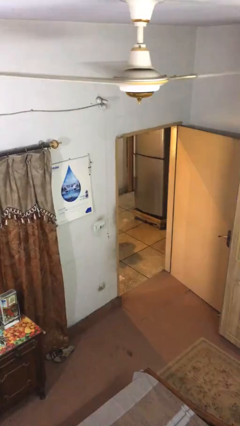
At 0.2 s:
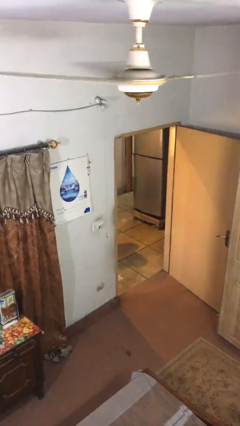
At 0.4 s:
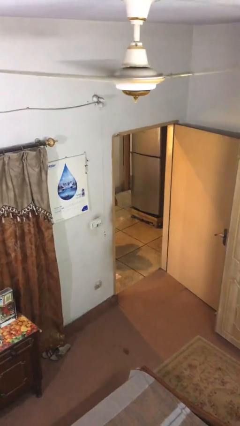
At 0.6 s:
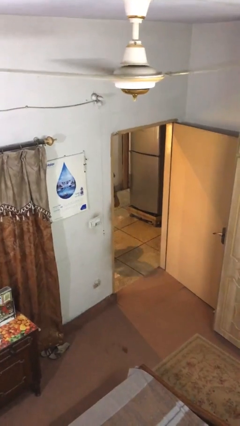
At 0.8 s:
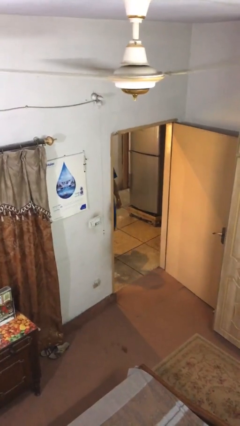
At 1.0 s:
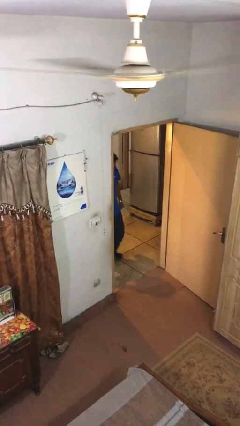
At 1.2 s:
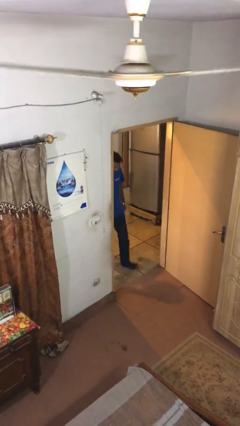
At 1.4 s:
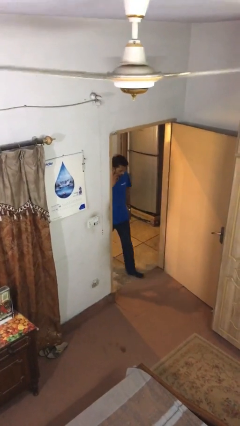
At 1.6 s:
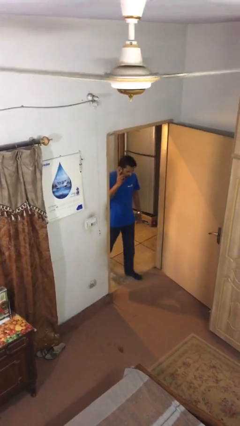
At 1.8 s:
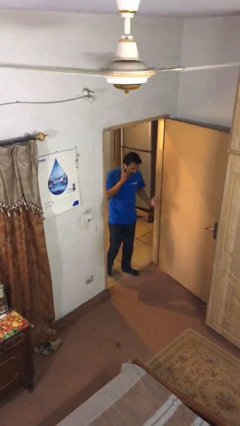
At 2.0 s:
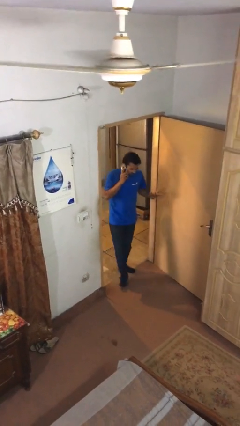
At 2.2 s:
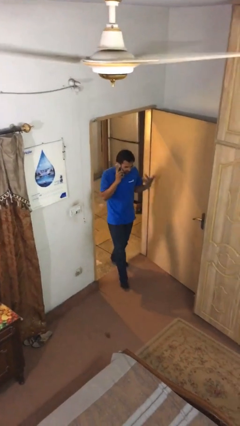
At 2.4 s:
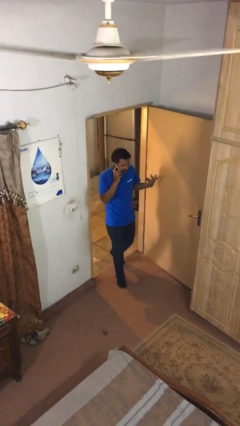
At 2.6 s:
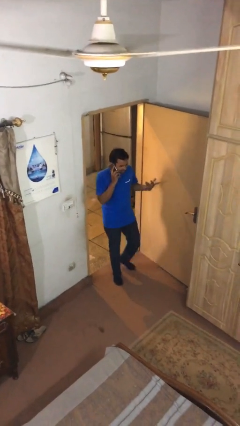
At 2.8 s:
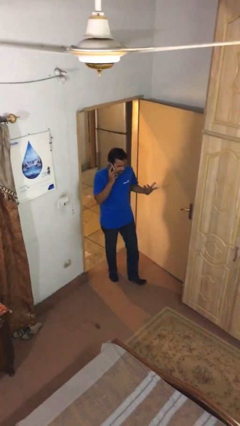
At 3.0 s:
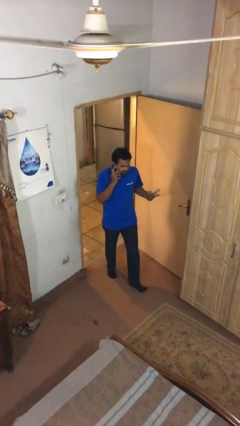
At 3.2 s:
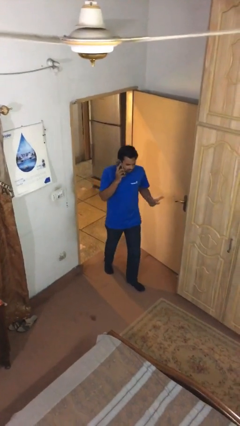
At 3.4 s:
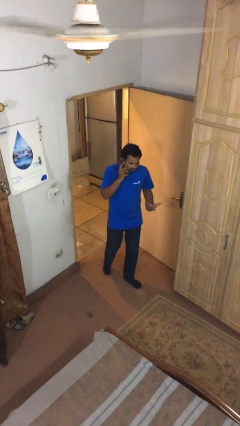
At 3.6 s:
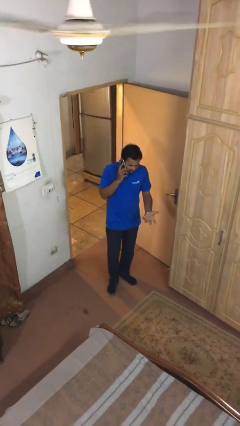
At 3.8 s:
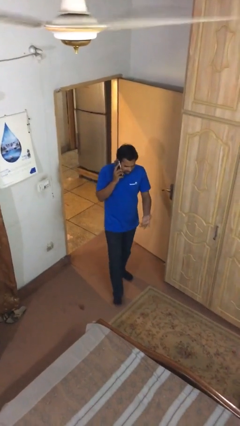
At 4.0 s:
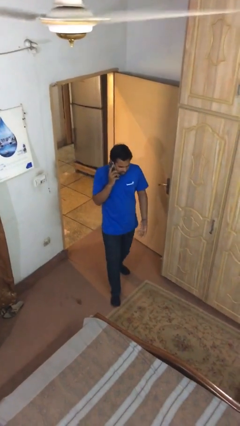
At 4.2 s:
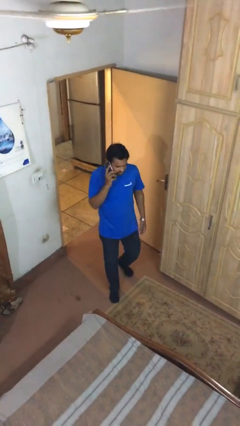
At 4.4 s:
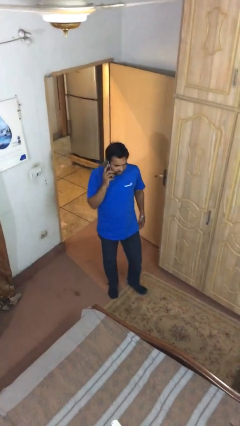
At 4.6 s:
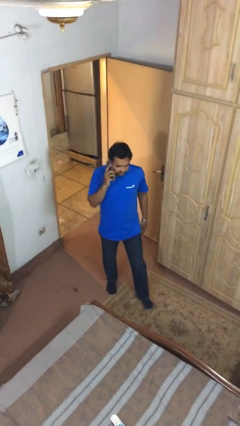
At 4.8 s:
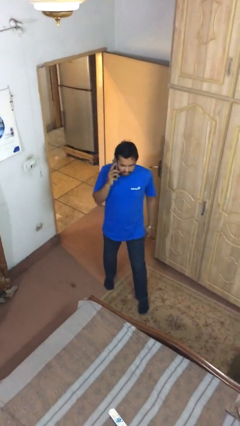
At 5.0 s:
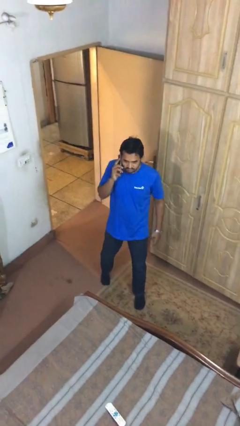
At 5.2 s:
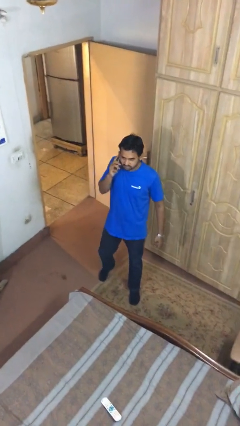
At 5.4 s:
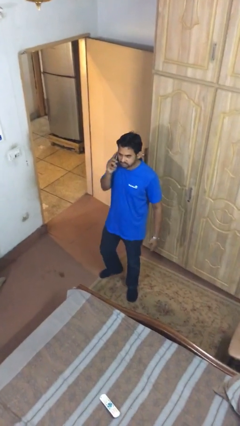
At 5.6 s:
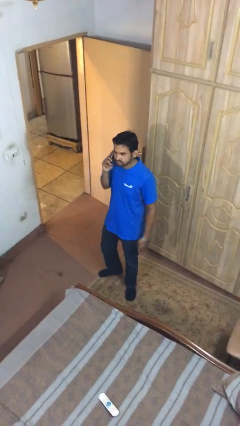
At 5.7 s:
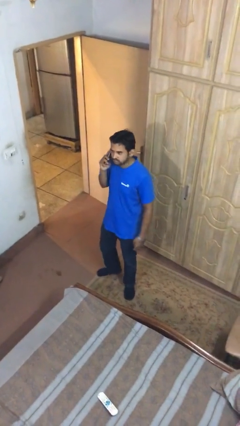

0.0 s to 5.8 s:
person enters scene through structure

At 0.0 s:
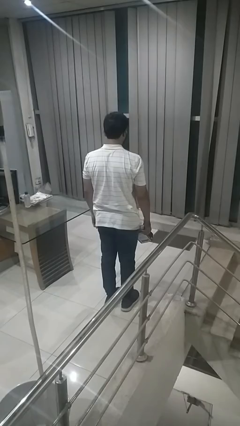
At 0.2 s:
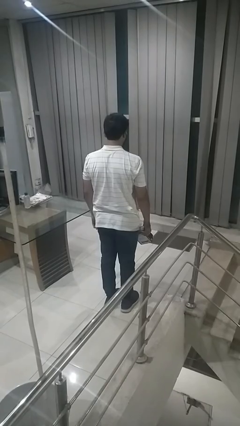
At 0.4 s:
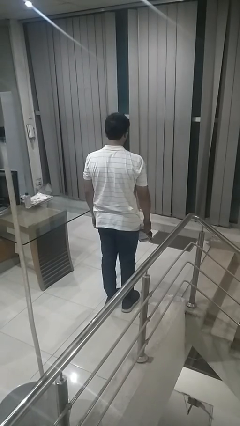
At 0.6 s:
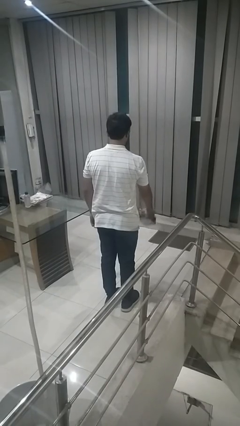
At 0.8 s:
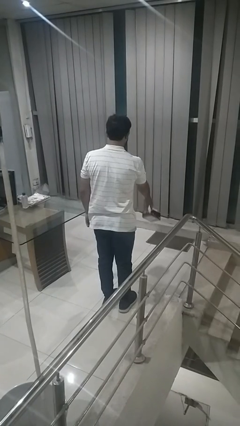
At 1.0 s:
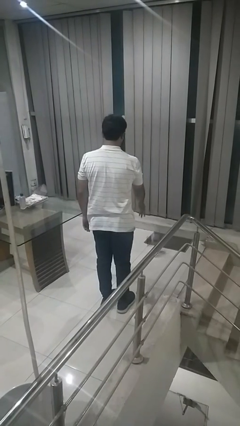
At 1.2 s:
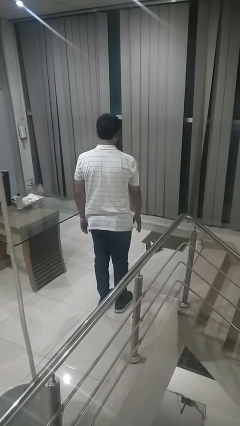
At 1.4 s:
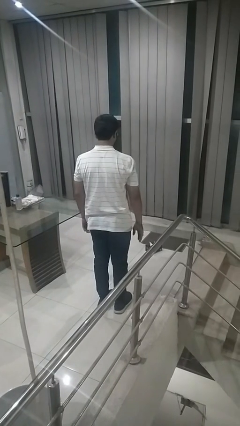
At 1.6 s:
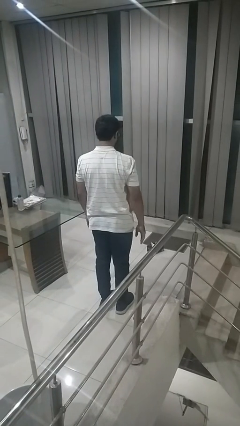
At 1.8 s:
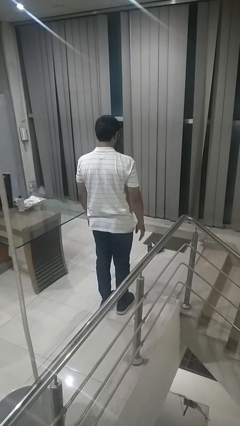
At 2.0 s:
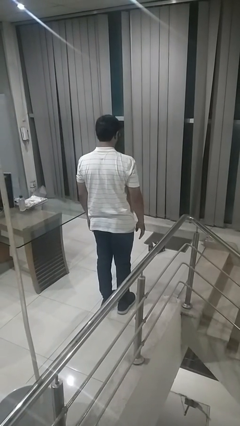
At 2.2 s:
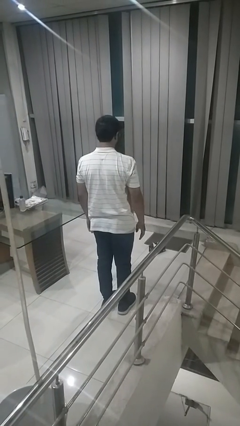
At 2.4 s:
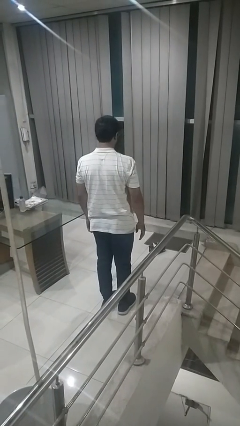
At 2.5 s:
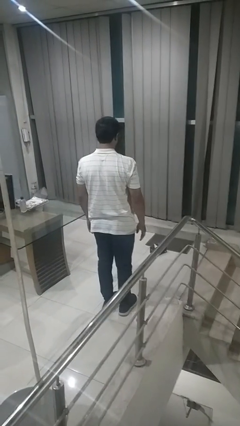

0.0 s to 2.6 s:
person throws object to ground

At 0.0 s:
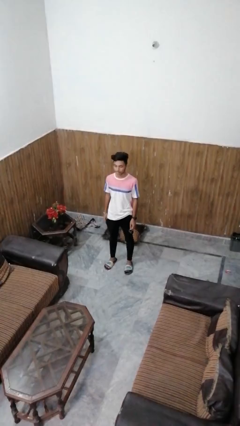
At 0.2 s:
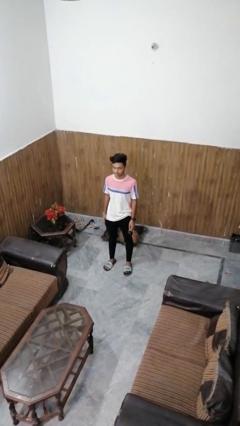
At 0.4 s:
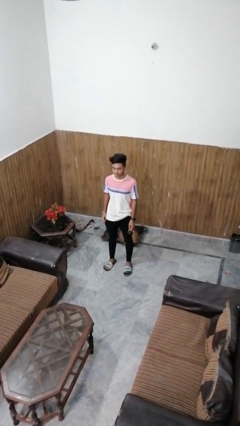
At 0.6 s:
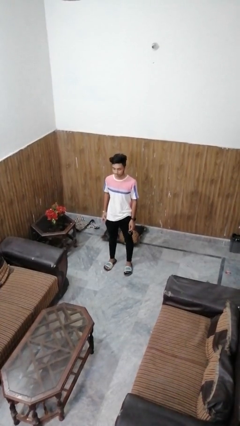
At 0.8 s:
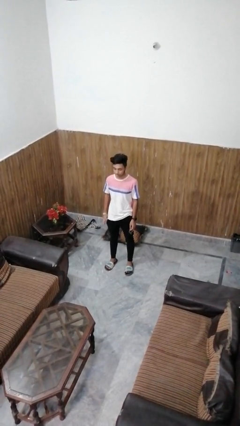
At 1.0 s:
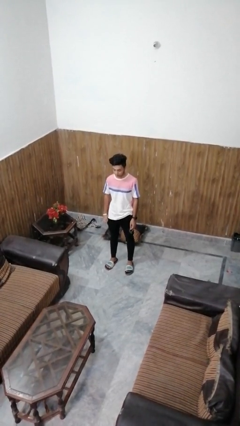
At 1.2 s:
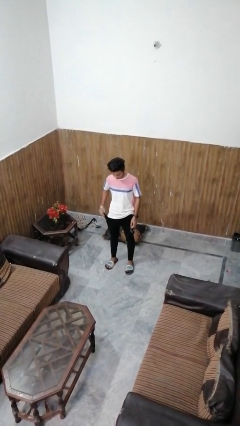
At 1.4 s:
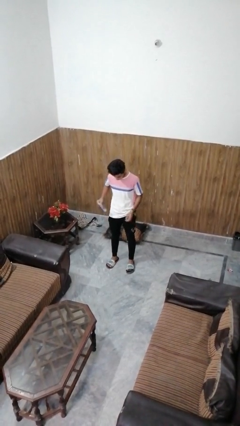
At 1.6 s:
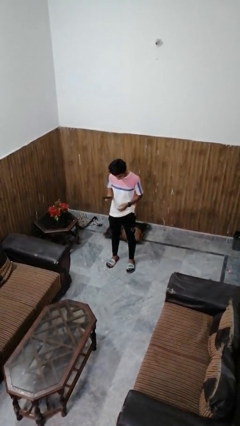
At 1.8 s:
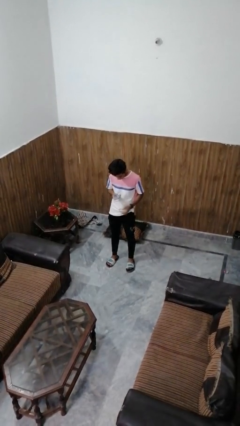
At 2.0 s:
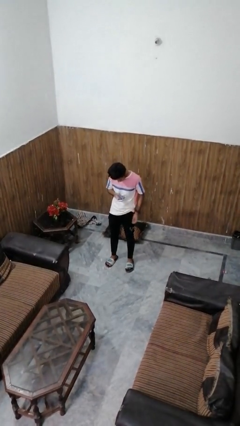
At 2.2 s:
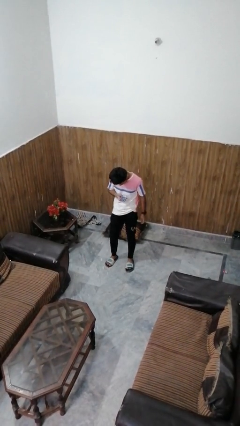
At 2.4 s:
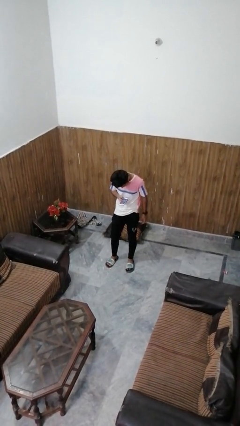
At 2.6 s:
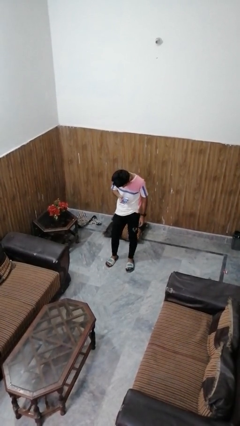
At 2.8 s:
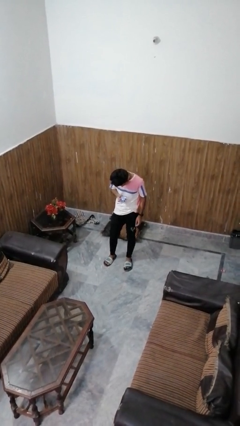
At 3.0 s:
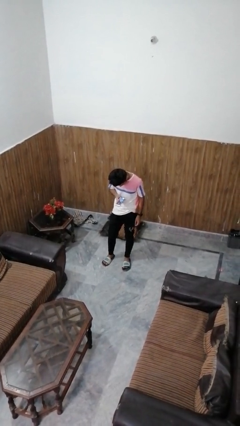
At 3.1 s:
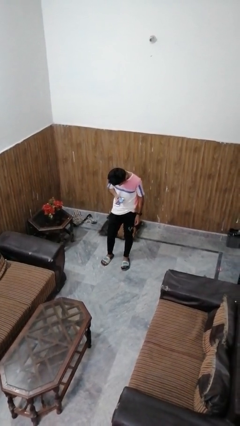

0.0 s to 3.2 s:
person takes phone from pocket

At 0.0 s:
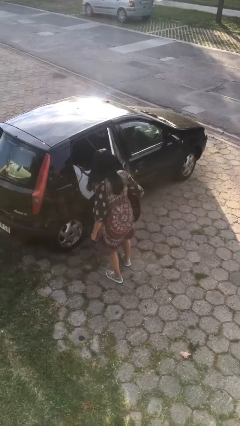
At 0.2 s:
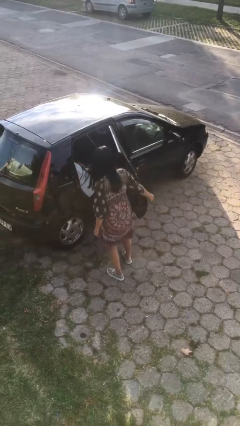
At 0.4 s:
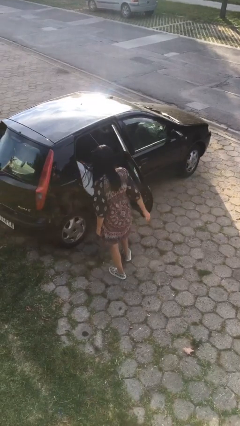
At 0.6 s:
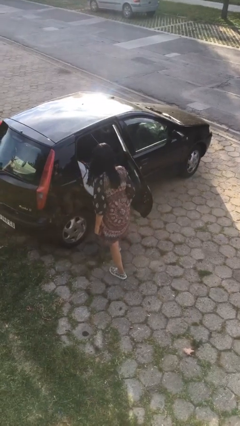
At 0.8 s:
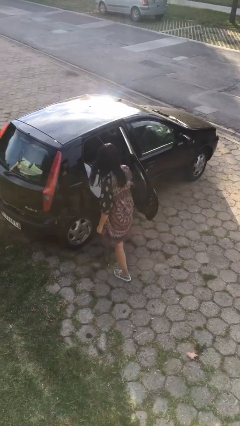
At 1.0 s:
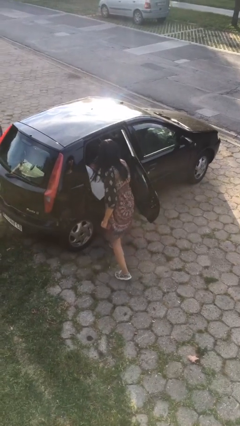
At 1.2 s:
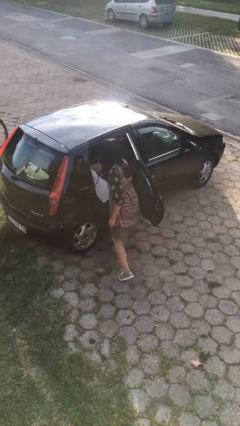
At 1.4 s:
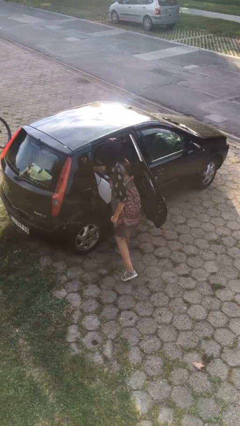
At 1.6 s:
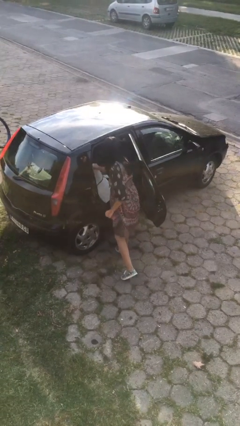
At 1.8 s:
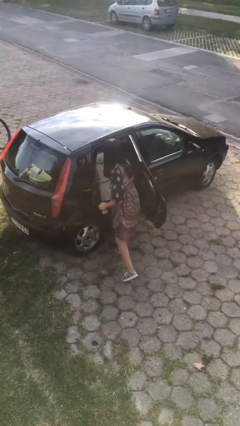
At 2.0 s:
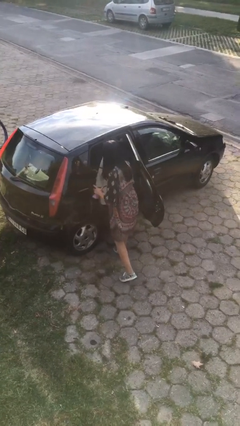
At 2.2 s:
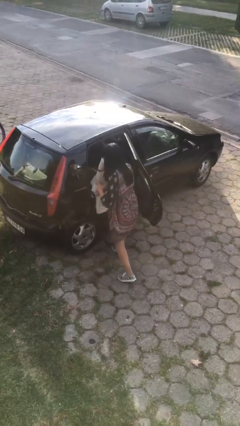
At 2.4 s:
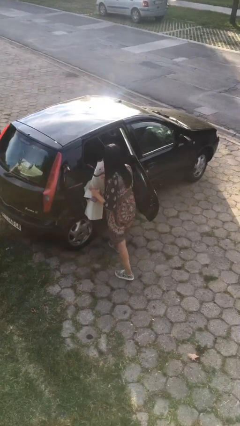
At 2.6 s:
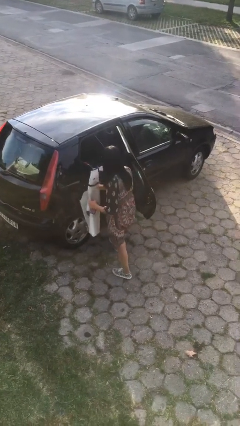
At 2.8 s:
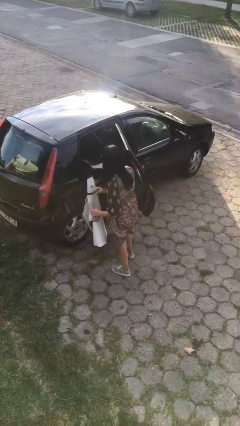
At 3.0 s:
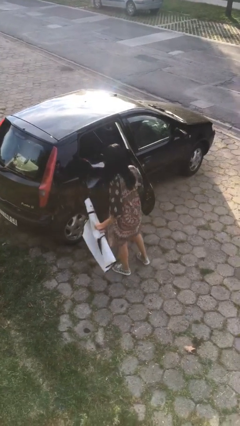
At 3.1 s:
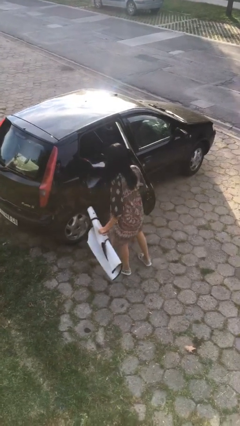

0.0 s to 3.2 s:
person unloads car

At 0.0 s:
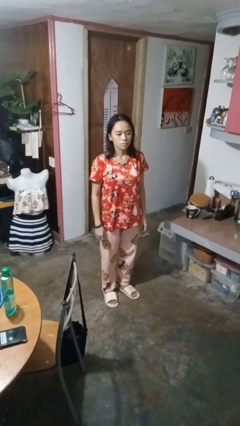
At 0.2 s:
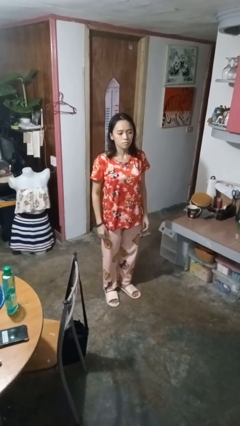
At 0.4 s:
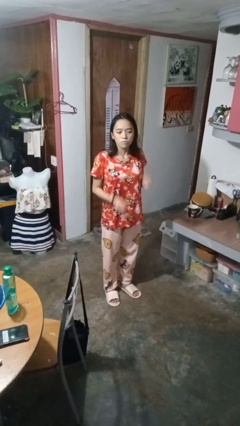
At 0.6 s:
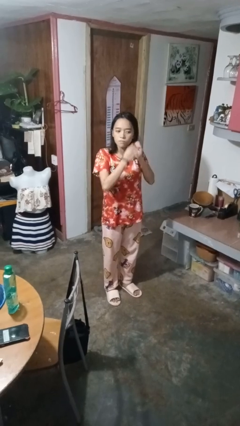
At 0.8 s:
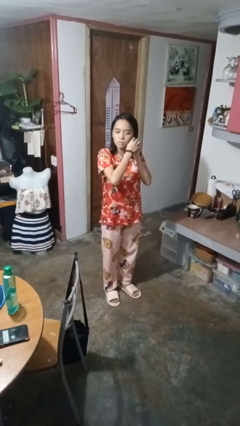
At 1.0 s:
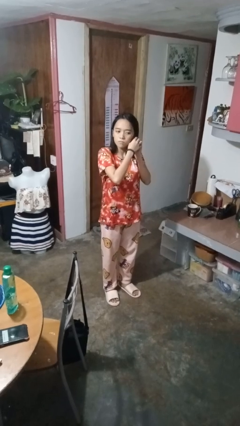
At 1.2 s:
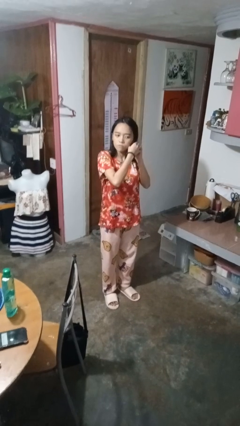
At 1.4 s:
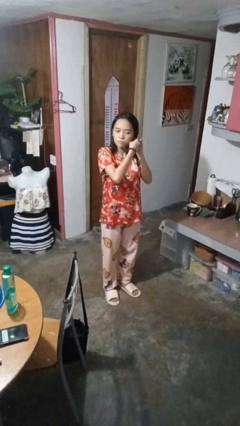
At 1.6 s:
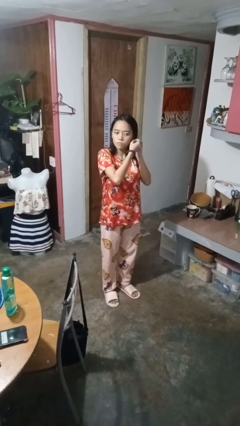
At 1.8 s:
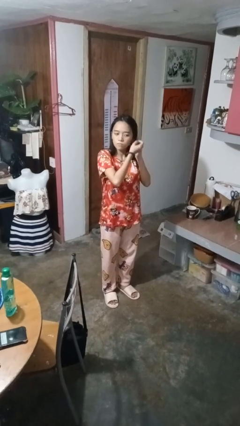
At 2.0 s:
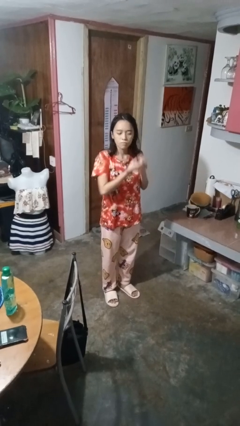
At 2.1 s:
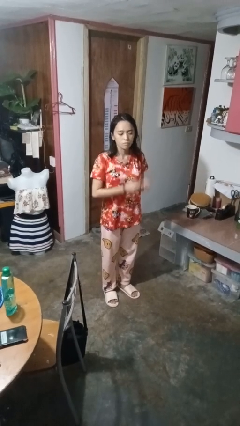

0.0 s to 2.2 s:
person takes off earrings

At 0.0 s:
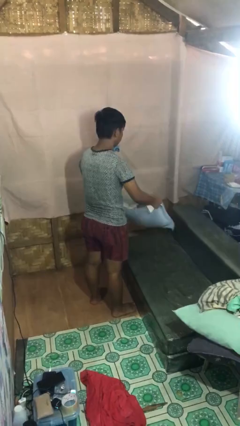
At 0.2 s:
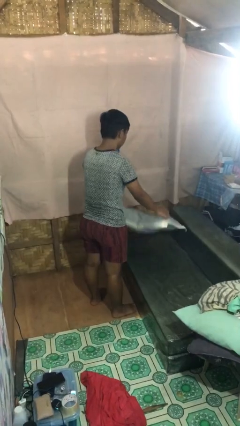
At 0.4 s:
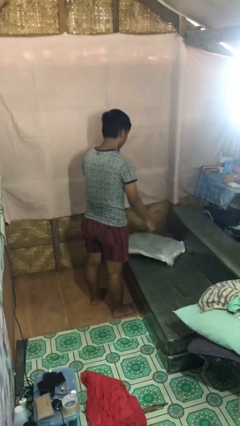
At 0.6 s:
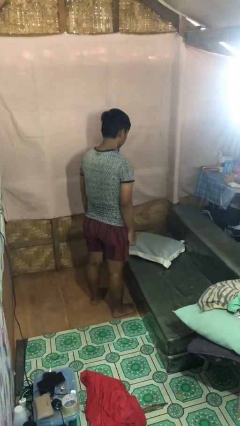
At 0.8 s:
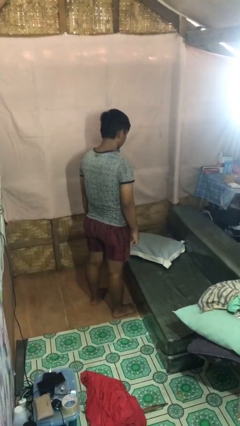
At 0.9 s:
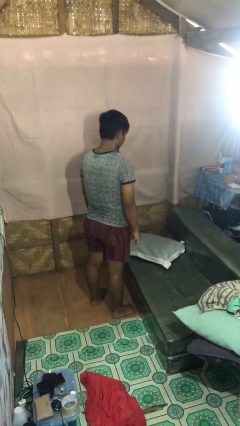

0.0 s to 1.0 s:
person puts down object on couch
